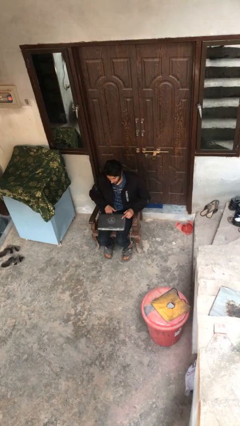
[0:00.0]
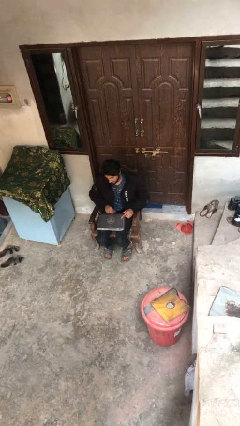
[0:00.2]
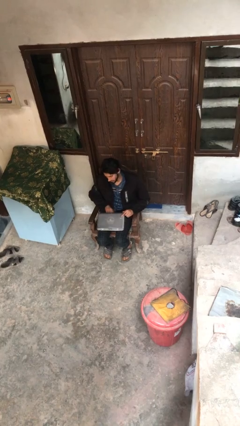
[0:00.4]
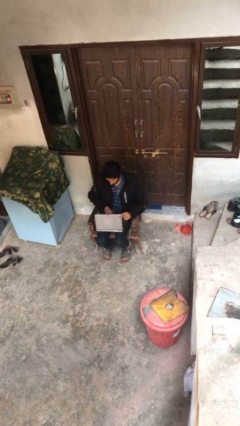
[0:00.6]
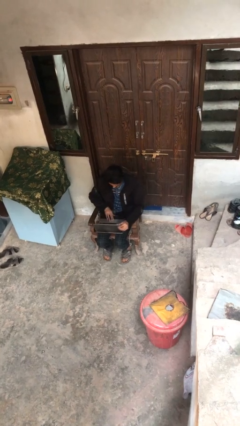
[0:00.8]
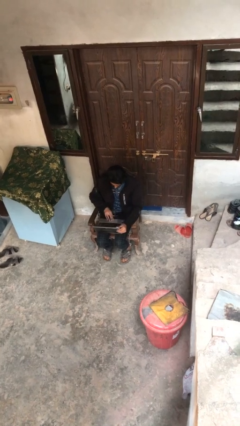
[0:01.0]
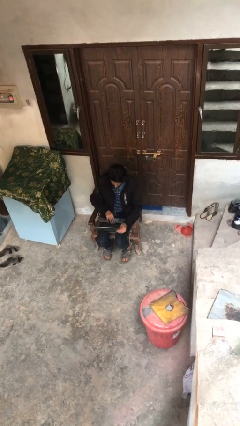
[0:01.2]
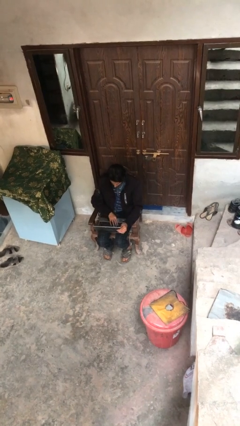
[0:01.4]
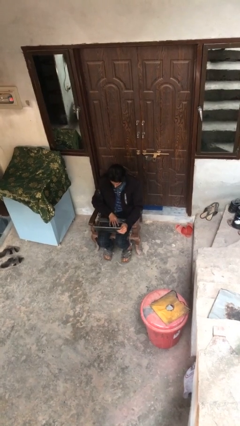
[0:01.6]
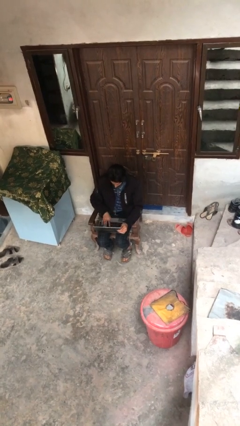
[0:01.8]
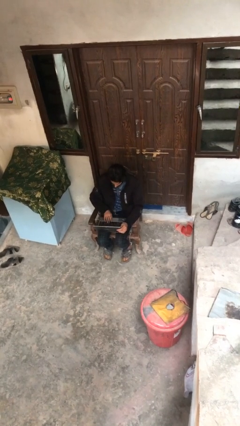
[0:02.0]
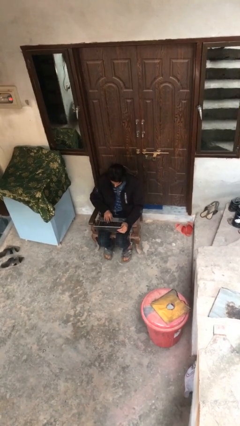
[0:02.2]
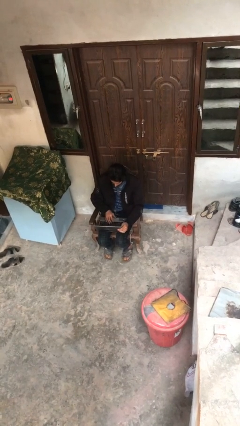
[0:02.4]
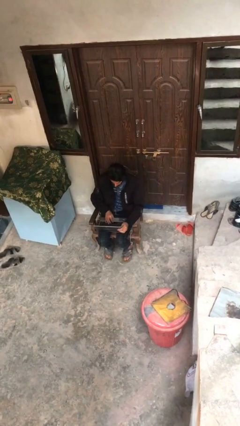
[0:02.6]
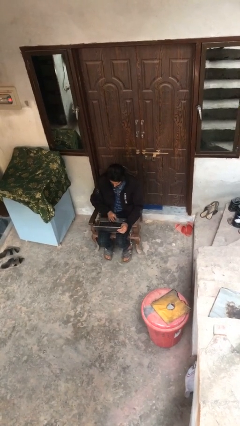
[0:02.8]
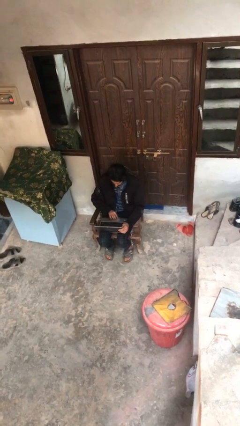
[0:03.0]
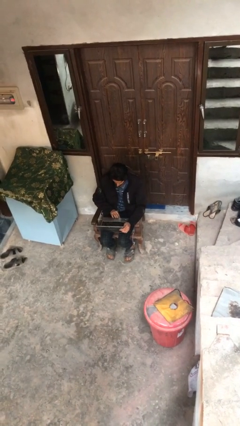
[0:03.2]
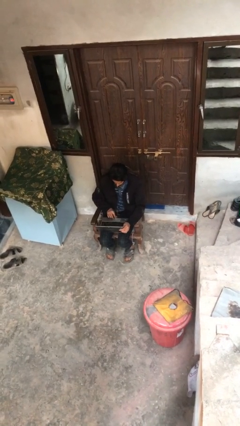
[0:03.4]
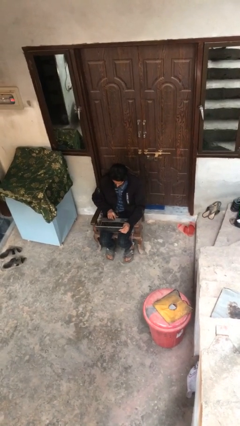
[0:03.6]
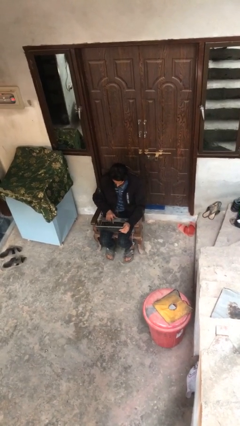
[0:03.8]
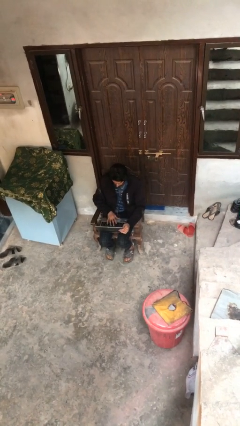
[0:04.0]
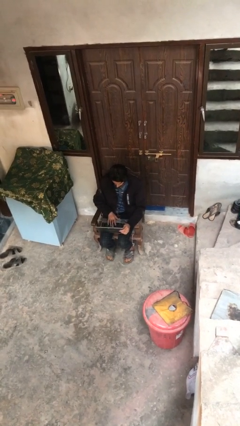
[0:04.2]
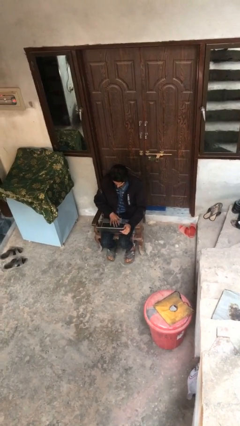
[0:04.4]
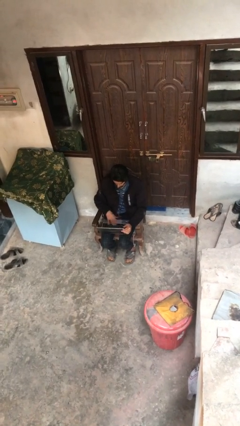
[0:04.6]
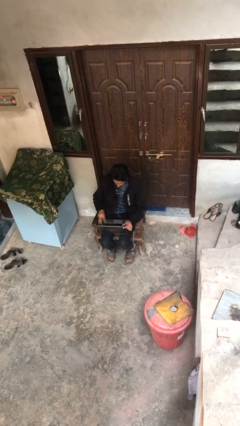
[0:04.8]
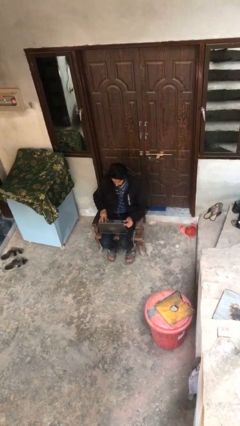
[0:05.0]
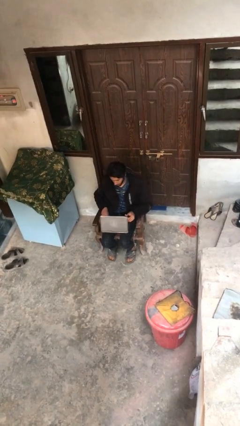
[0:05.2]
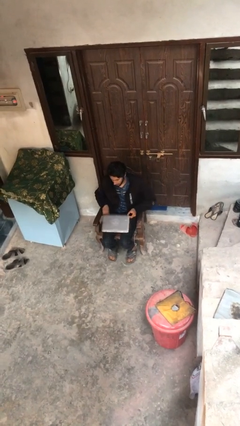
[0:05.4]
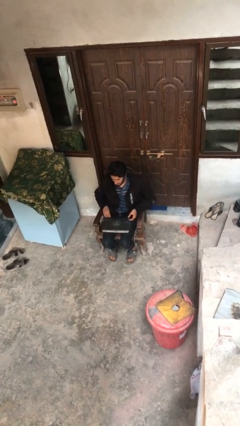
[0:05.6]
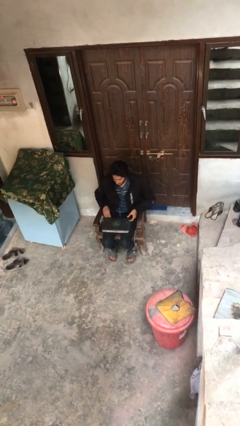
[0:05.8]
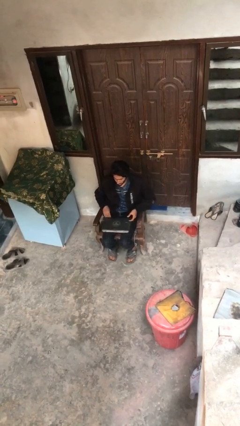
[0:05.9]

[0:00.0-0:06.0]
person interacts with laptop

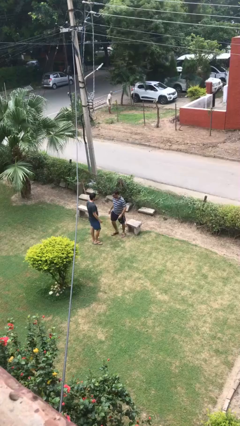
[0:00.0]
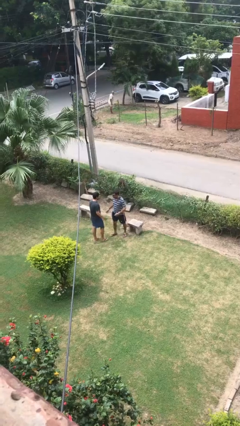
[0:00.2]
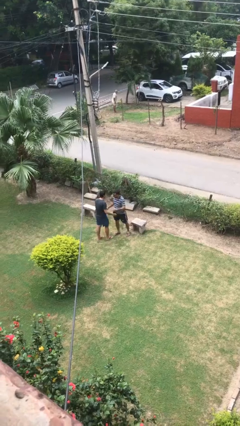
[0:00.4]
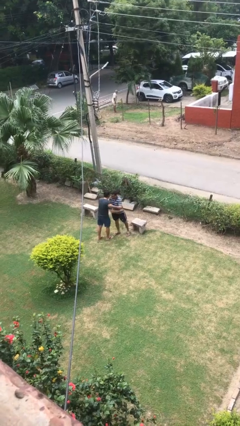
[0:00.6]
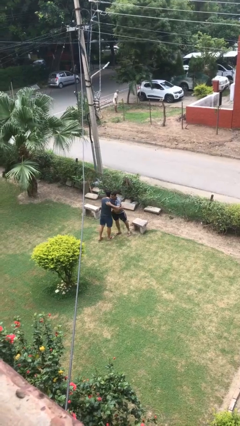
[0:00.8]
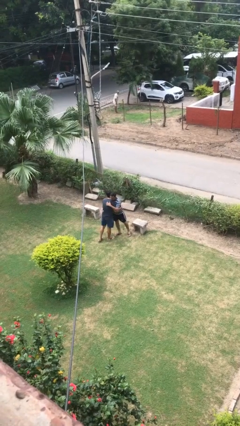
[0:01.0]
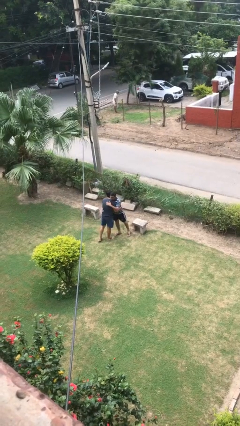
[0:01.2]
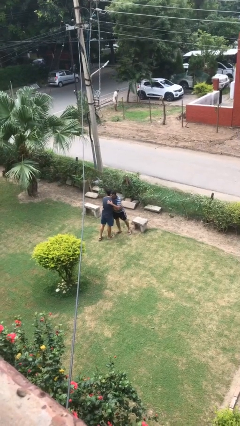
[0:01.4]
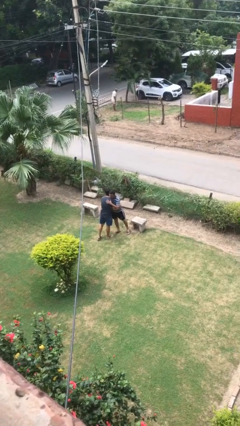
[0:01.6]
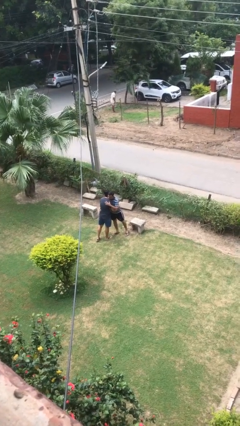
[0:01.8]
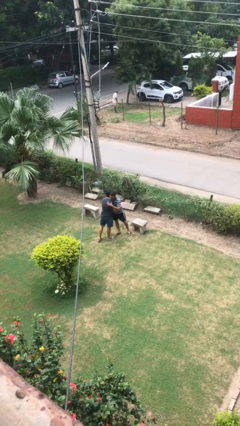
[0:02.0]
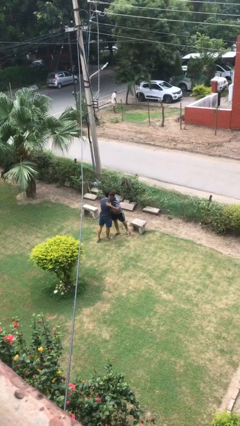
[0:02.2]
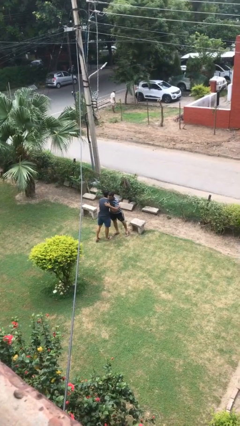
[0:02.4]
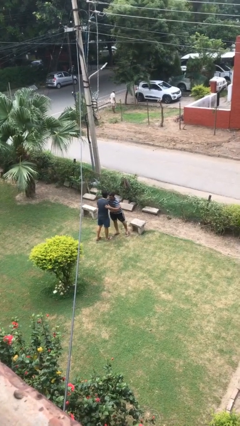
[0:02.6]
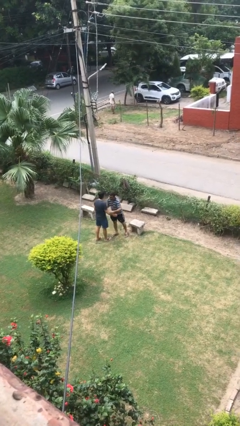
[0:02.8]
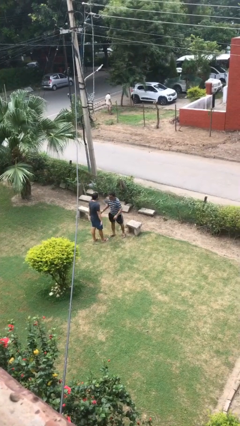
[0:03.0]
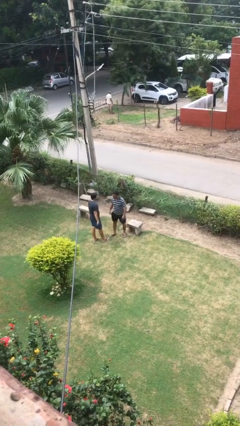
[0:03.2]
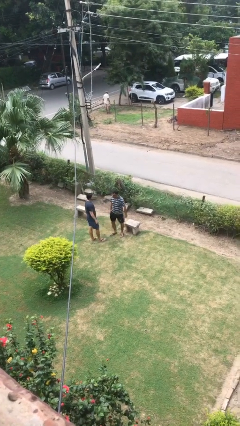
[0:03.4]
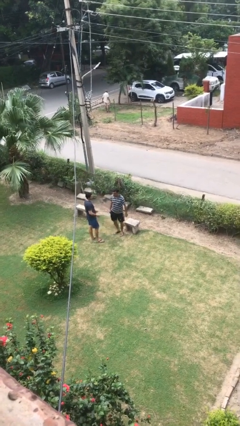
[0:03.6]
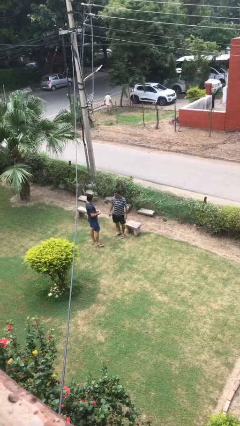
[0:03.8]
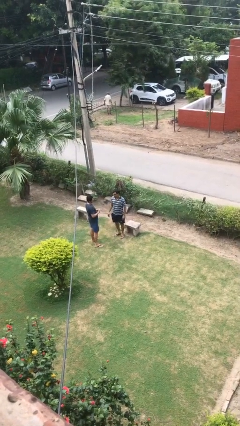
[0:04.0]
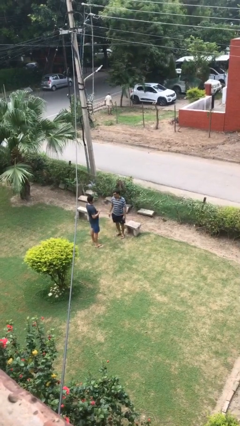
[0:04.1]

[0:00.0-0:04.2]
person embraces person

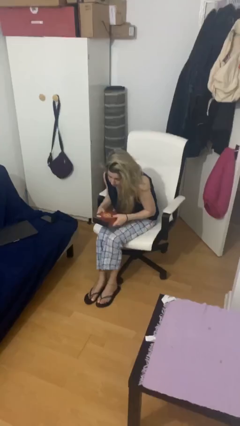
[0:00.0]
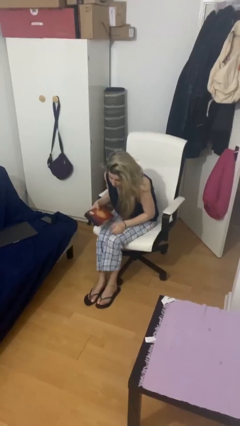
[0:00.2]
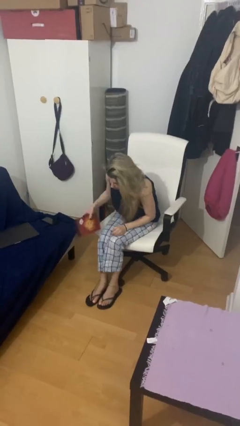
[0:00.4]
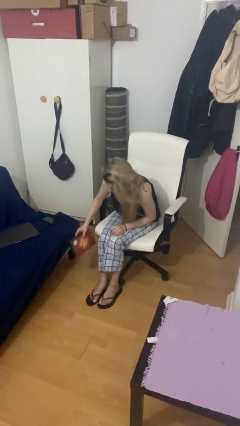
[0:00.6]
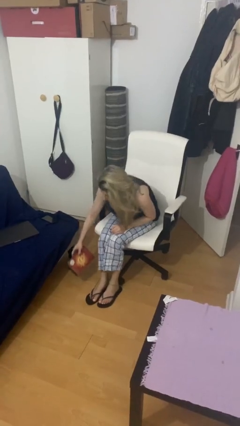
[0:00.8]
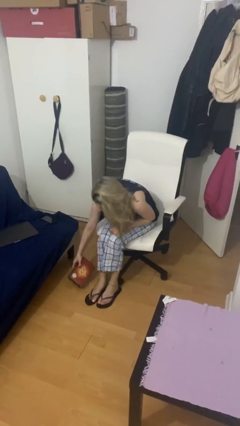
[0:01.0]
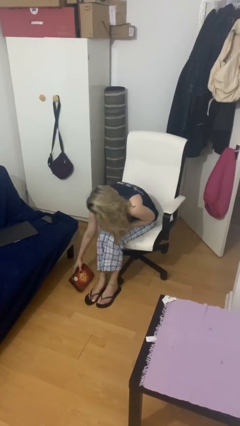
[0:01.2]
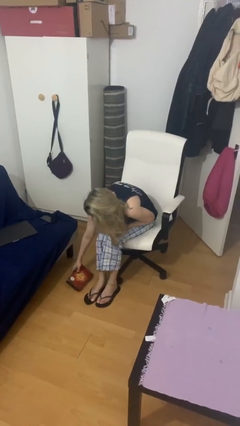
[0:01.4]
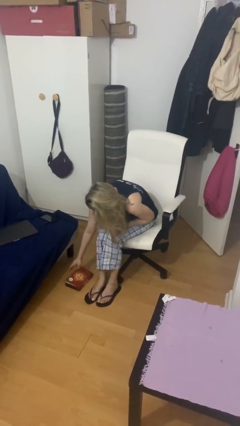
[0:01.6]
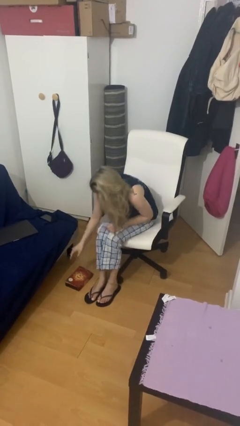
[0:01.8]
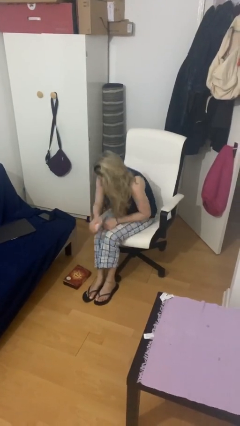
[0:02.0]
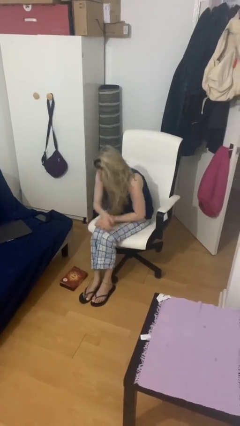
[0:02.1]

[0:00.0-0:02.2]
person puts down object on floor

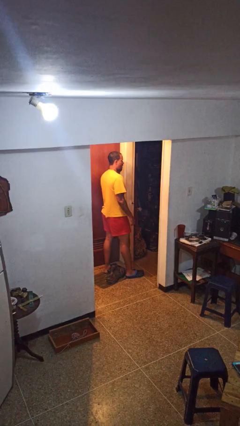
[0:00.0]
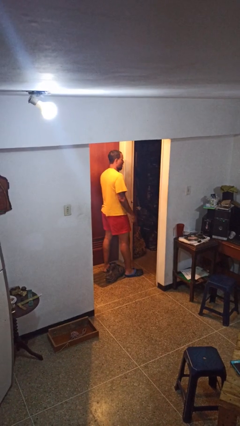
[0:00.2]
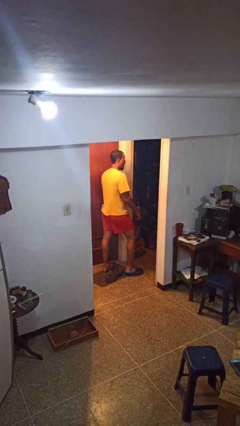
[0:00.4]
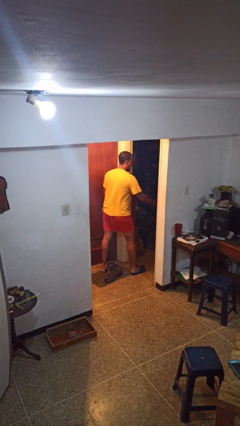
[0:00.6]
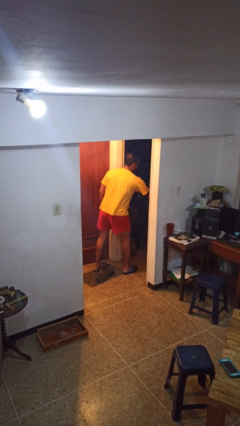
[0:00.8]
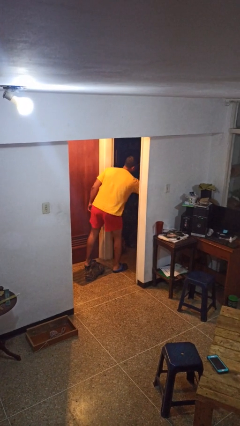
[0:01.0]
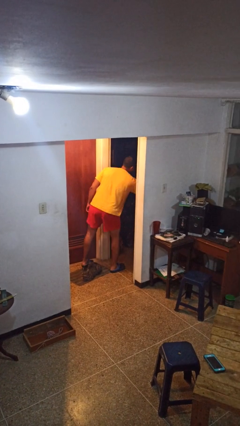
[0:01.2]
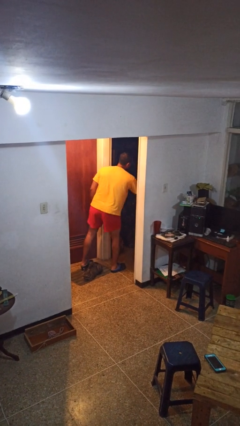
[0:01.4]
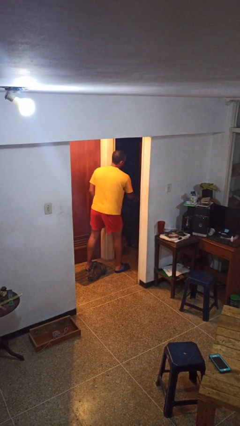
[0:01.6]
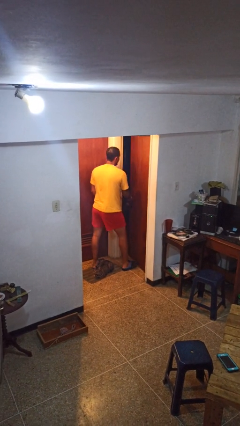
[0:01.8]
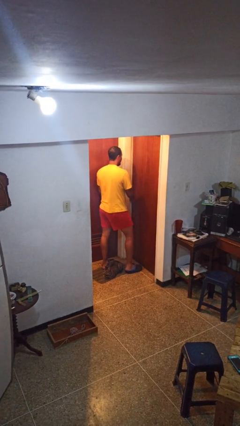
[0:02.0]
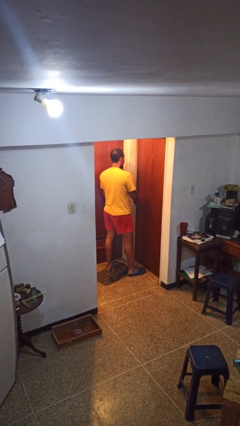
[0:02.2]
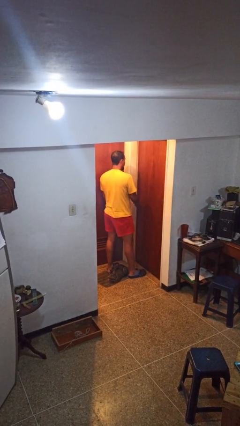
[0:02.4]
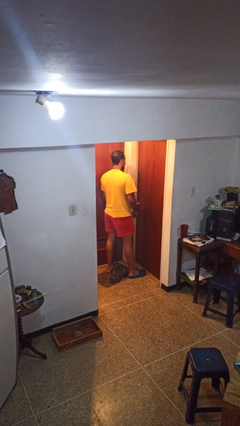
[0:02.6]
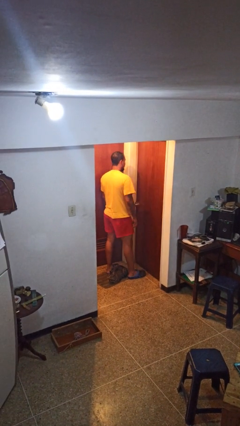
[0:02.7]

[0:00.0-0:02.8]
person closes facility door

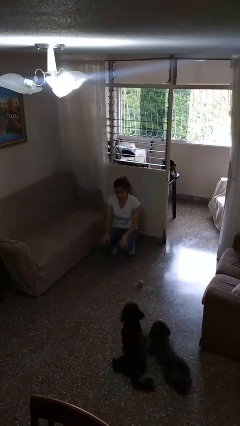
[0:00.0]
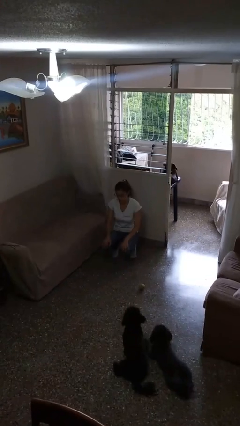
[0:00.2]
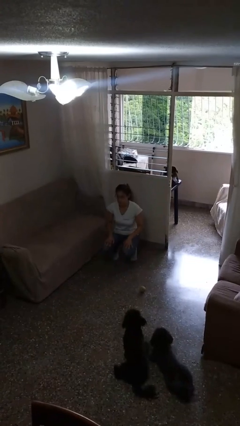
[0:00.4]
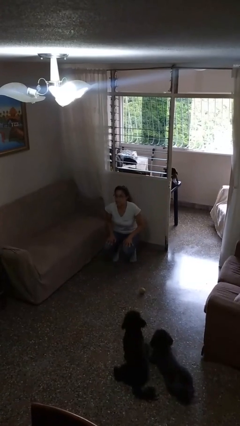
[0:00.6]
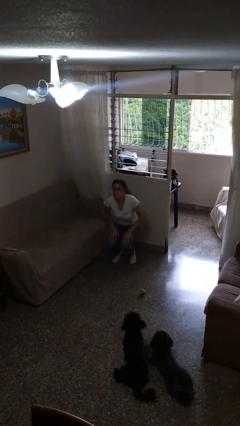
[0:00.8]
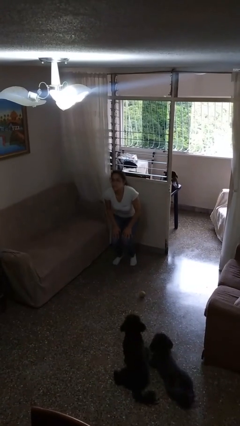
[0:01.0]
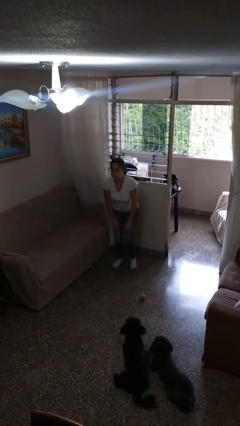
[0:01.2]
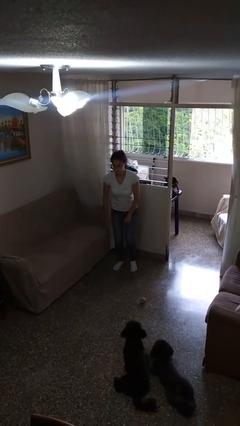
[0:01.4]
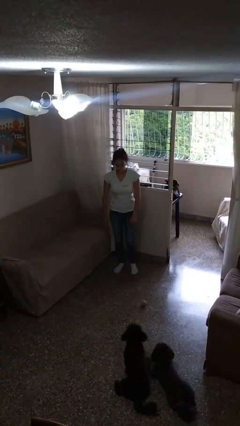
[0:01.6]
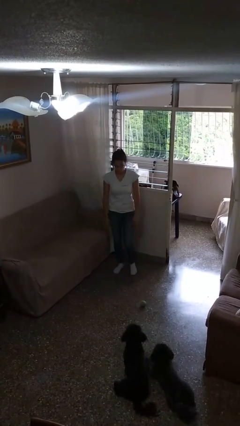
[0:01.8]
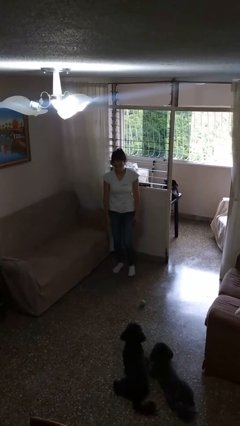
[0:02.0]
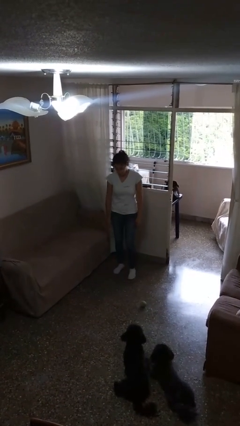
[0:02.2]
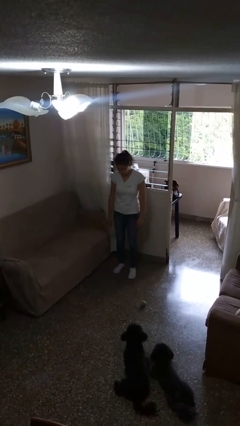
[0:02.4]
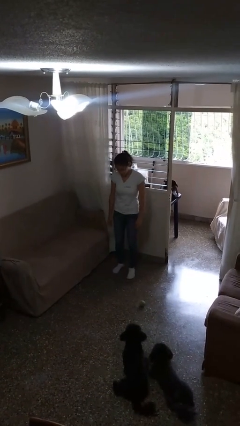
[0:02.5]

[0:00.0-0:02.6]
person stands up
